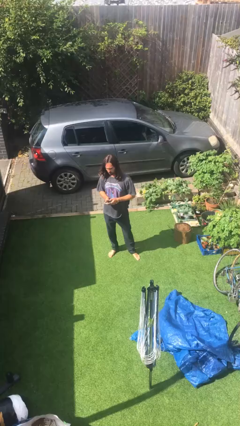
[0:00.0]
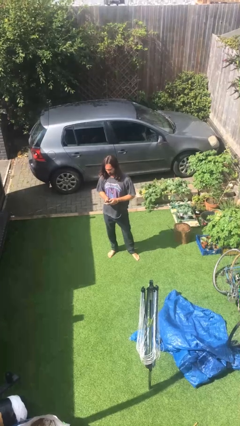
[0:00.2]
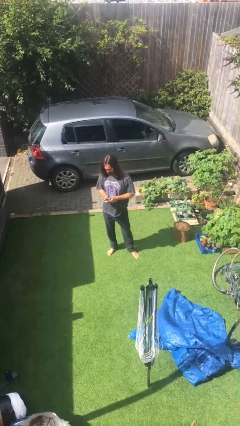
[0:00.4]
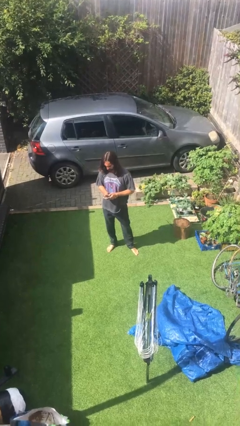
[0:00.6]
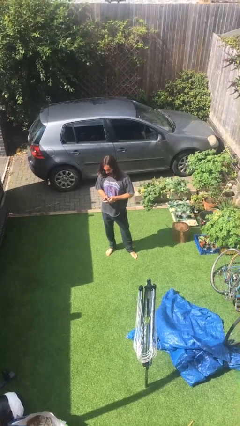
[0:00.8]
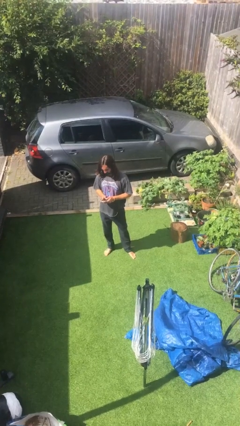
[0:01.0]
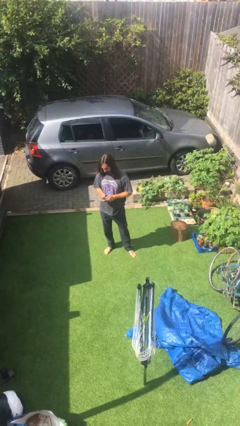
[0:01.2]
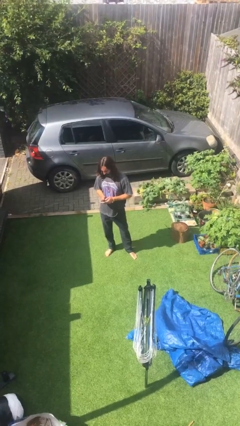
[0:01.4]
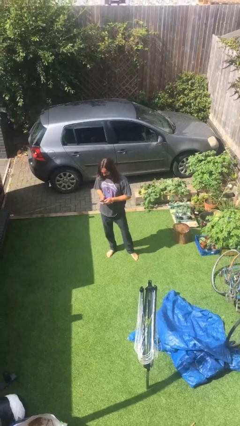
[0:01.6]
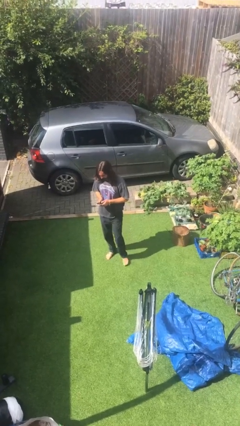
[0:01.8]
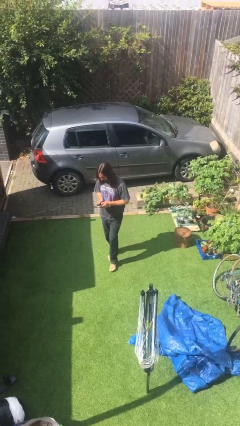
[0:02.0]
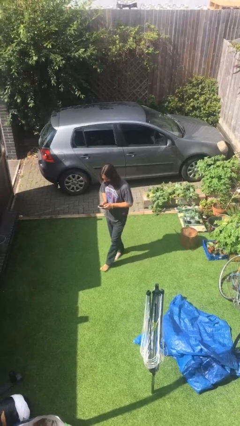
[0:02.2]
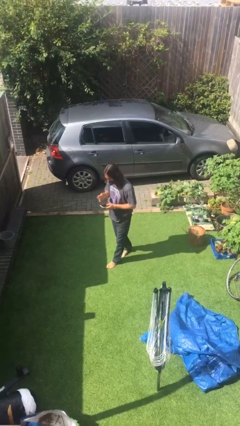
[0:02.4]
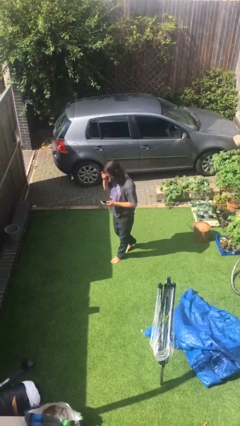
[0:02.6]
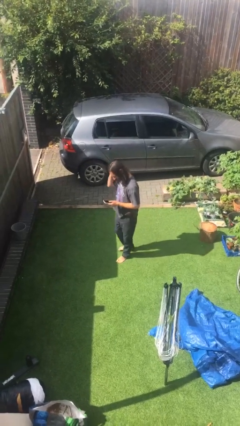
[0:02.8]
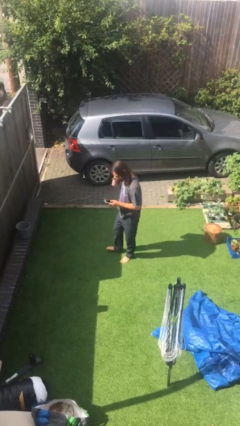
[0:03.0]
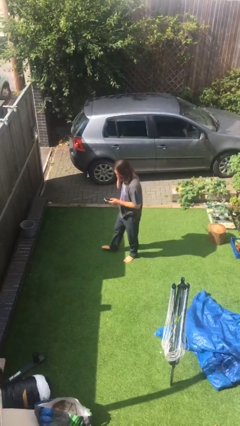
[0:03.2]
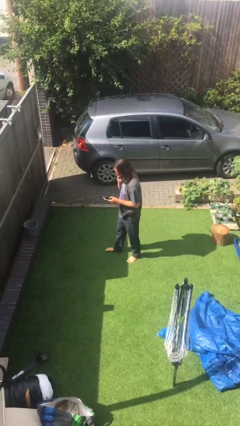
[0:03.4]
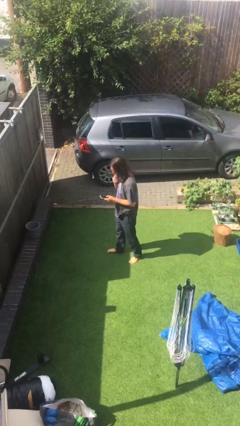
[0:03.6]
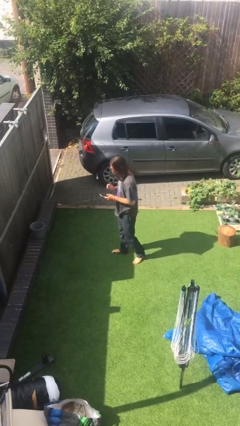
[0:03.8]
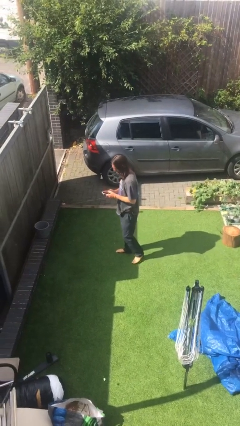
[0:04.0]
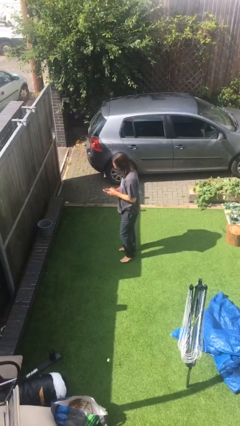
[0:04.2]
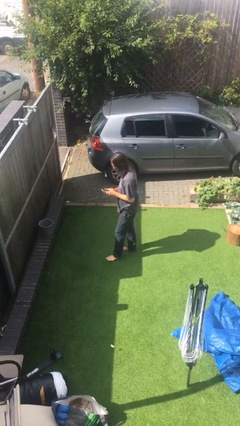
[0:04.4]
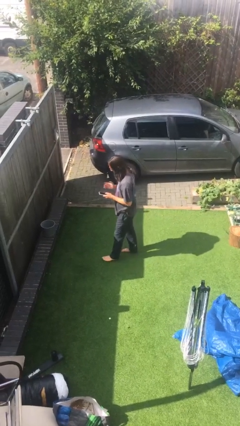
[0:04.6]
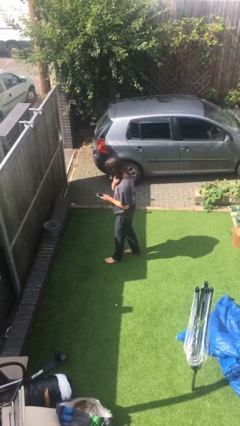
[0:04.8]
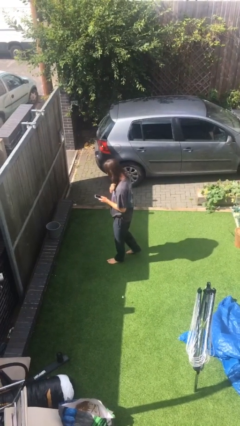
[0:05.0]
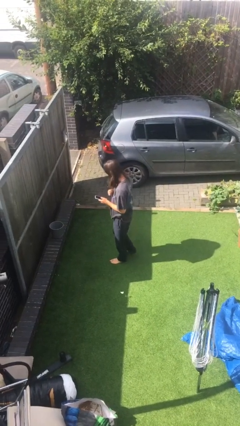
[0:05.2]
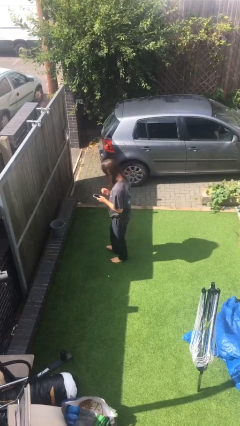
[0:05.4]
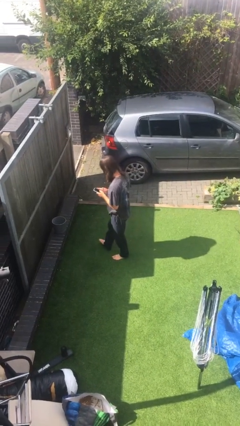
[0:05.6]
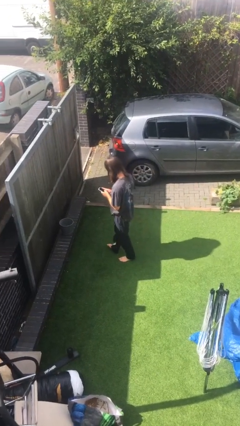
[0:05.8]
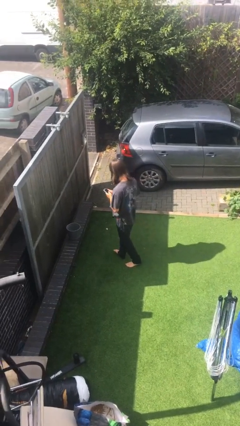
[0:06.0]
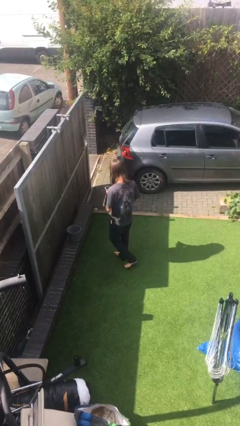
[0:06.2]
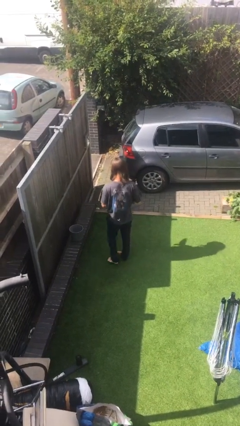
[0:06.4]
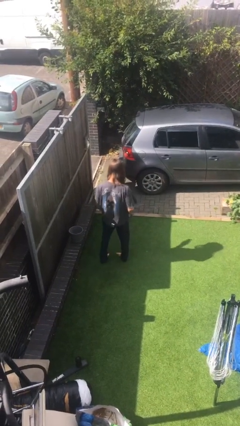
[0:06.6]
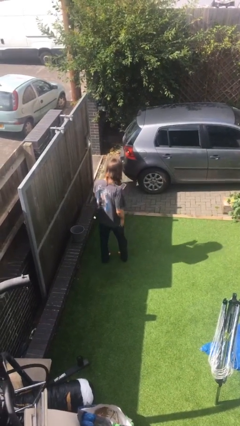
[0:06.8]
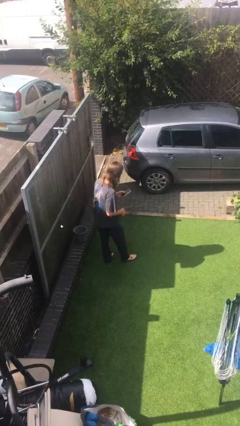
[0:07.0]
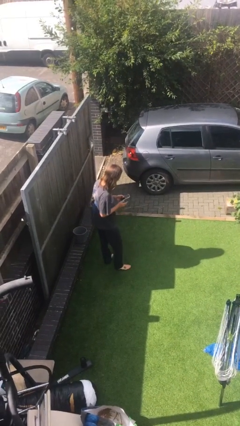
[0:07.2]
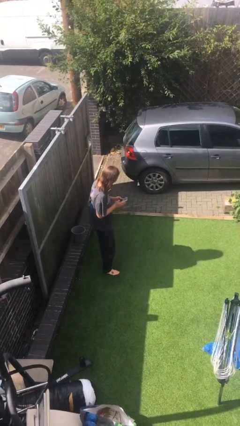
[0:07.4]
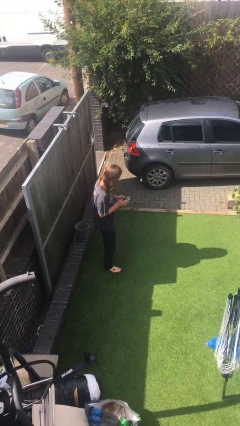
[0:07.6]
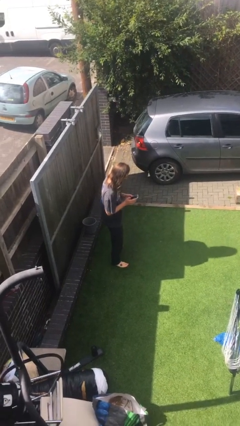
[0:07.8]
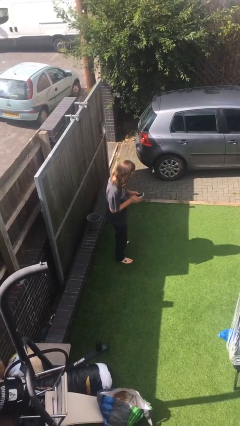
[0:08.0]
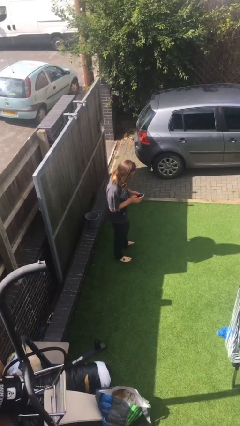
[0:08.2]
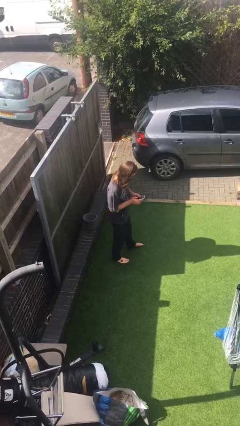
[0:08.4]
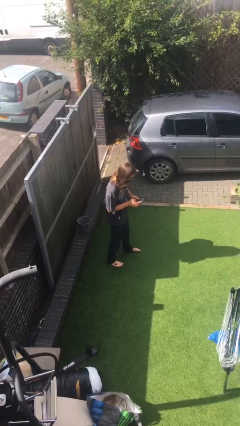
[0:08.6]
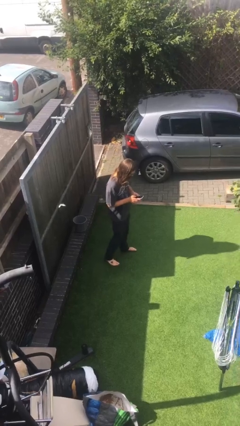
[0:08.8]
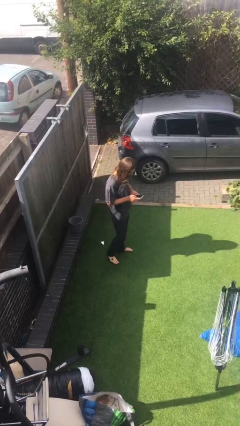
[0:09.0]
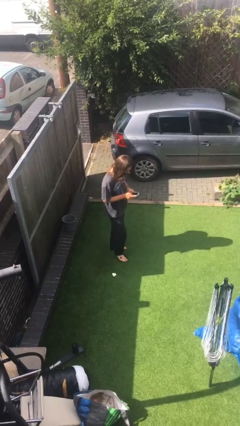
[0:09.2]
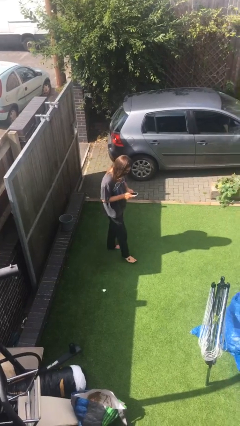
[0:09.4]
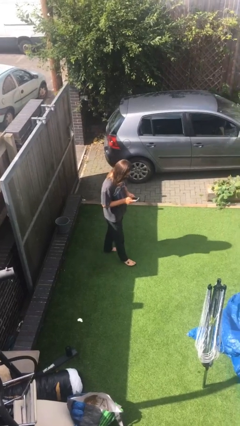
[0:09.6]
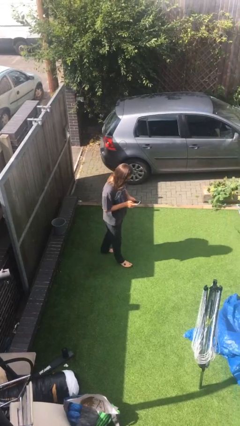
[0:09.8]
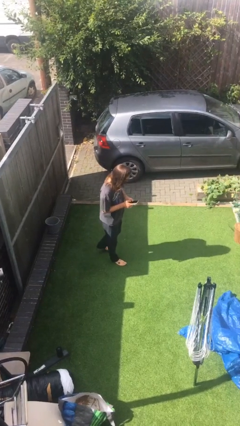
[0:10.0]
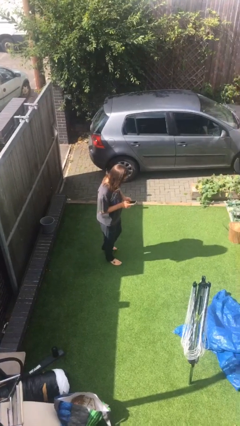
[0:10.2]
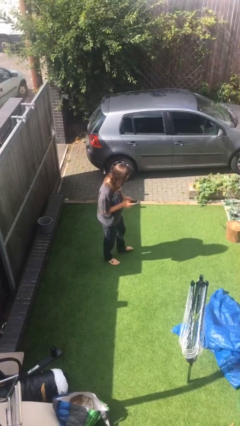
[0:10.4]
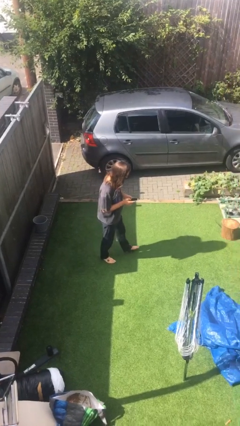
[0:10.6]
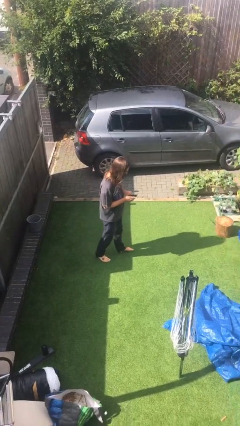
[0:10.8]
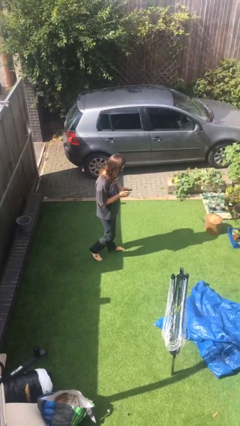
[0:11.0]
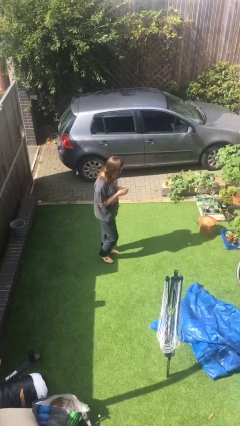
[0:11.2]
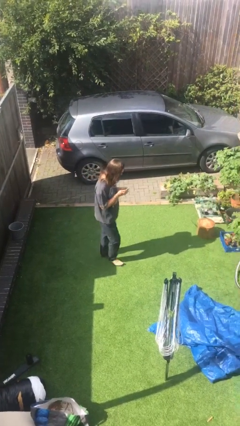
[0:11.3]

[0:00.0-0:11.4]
person texts on phone

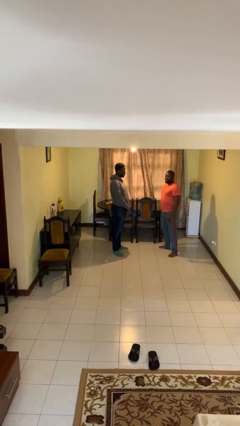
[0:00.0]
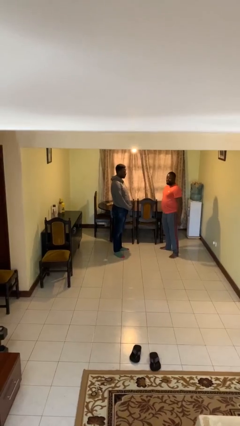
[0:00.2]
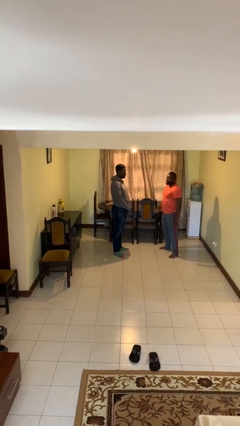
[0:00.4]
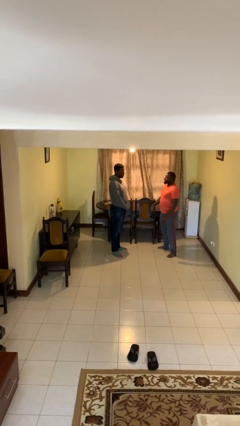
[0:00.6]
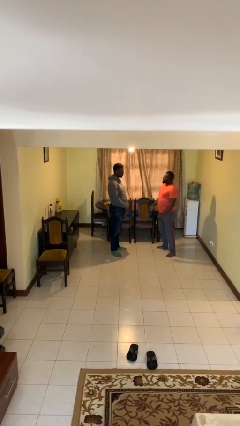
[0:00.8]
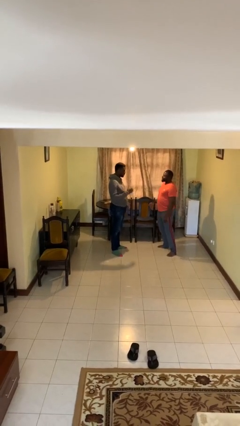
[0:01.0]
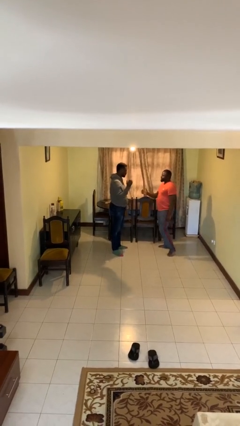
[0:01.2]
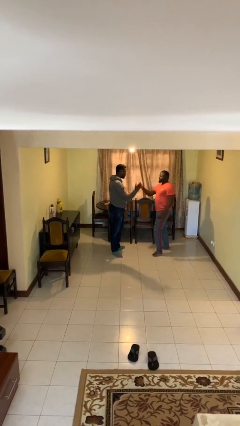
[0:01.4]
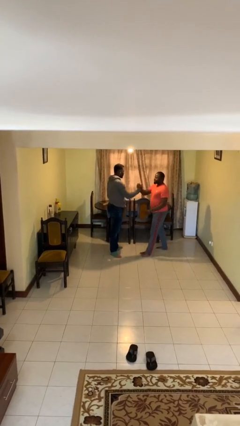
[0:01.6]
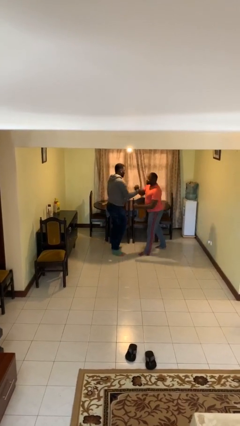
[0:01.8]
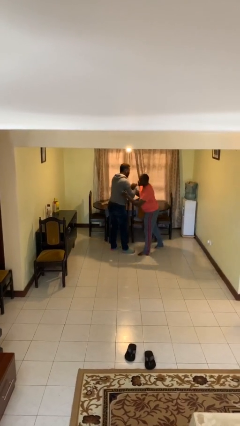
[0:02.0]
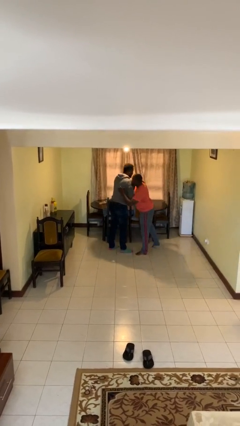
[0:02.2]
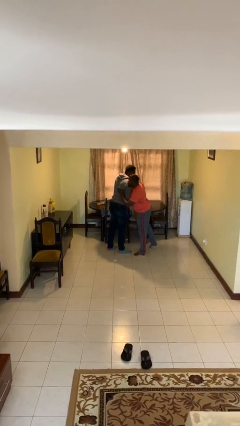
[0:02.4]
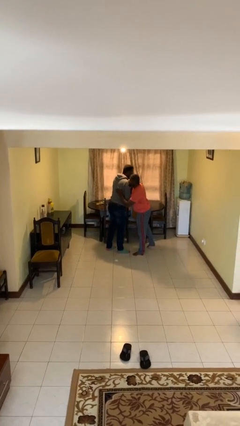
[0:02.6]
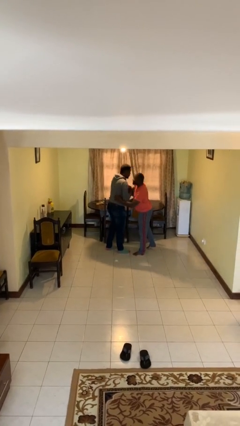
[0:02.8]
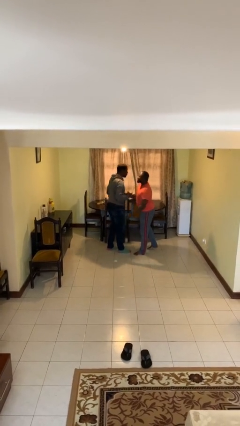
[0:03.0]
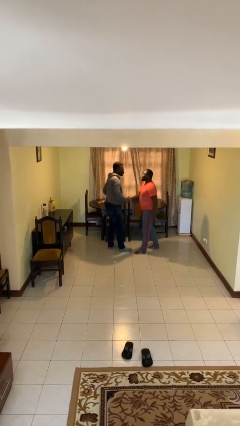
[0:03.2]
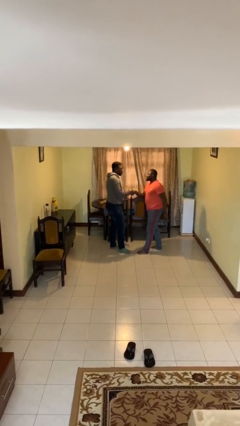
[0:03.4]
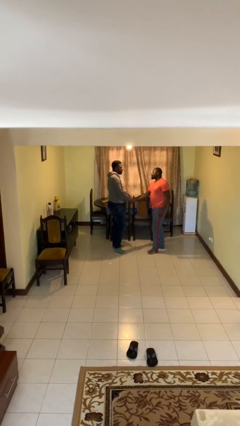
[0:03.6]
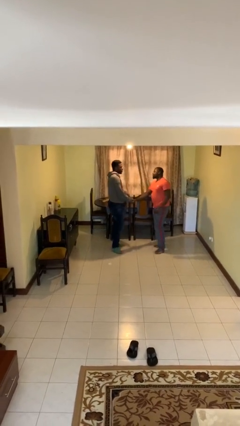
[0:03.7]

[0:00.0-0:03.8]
person embraces person

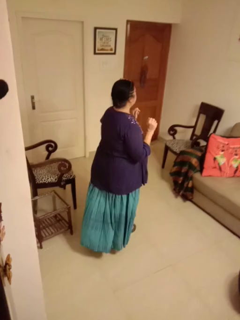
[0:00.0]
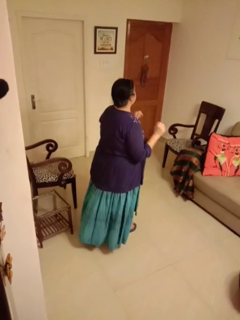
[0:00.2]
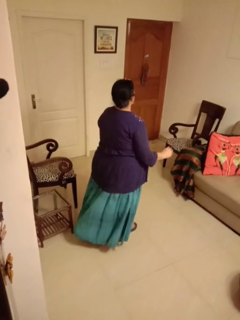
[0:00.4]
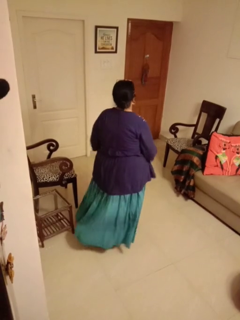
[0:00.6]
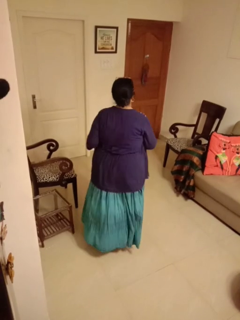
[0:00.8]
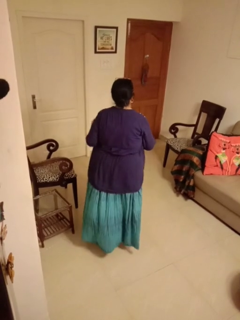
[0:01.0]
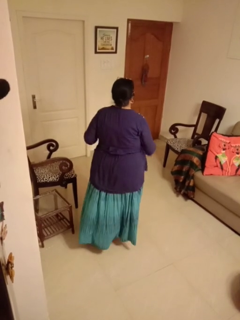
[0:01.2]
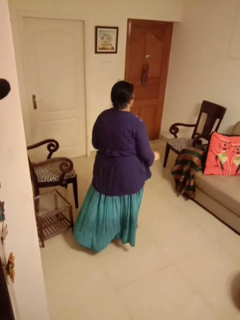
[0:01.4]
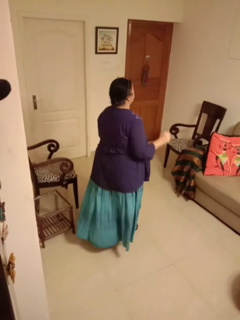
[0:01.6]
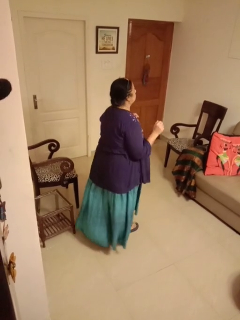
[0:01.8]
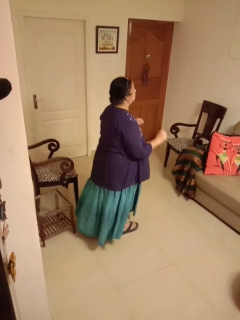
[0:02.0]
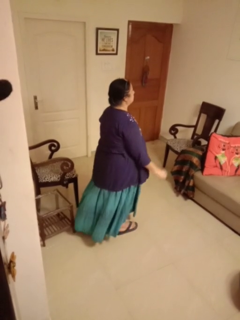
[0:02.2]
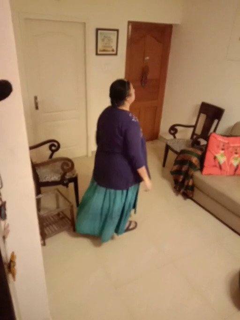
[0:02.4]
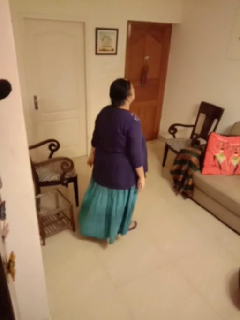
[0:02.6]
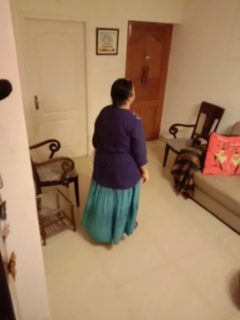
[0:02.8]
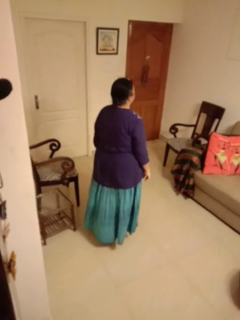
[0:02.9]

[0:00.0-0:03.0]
person dances in place

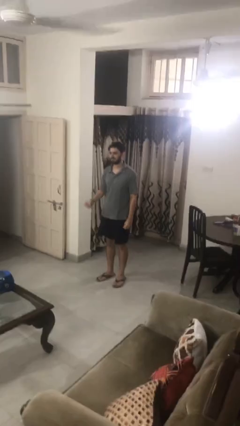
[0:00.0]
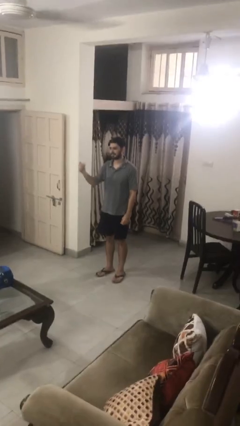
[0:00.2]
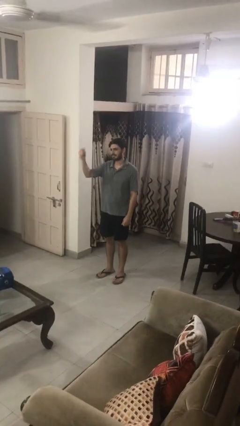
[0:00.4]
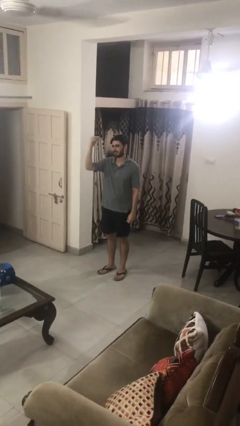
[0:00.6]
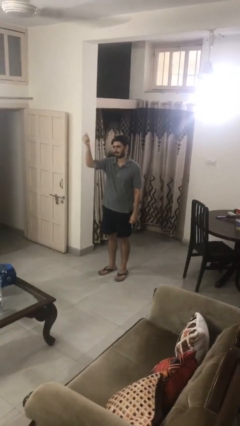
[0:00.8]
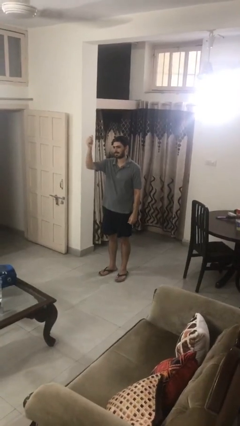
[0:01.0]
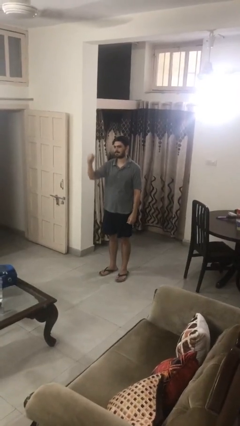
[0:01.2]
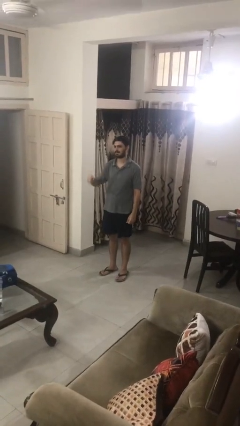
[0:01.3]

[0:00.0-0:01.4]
person snaps fingers
